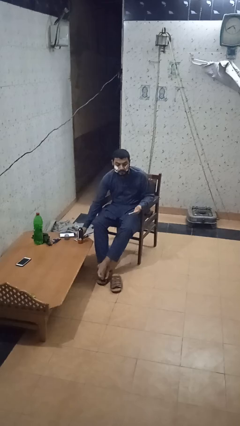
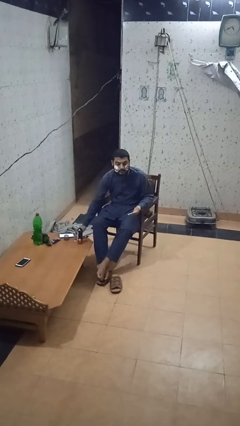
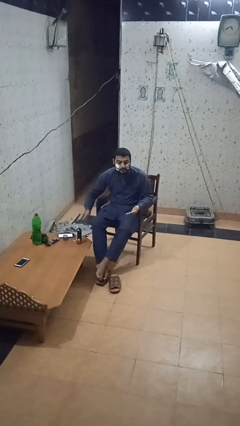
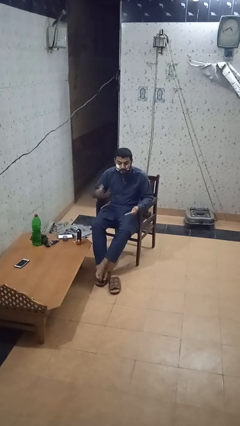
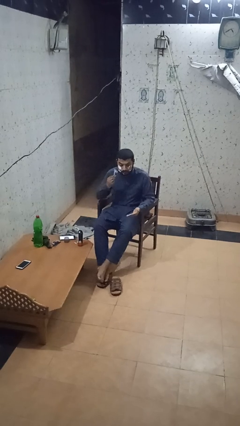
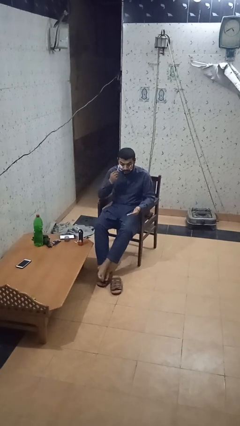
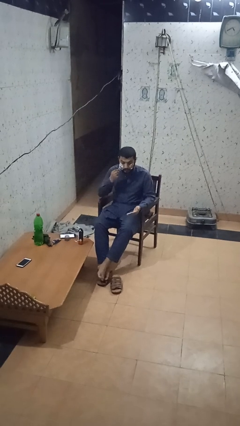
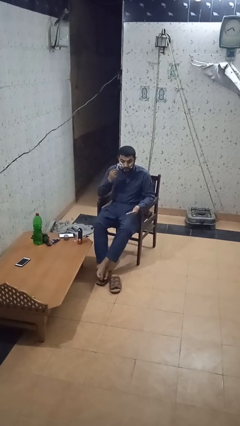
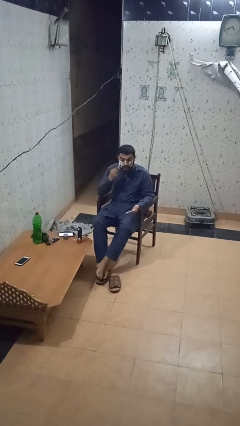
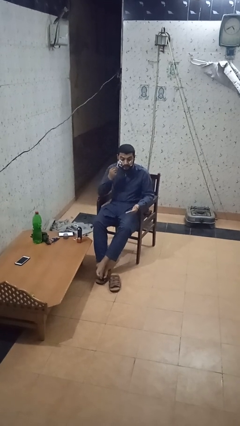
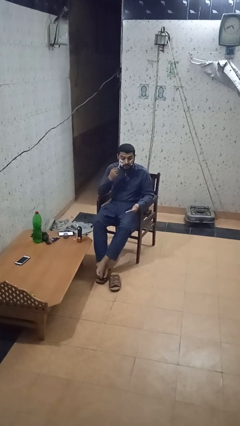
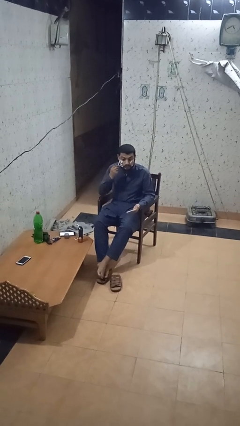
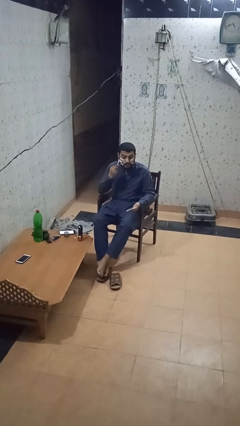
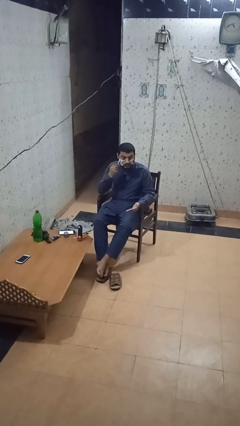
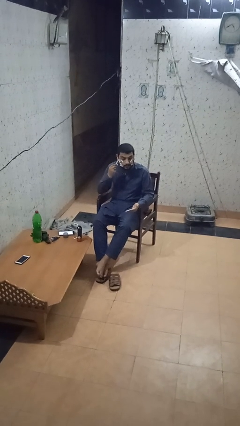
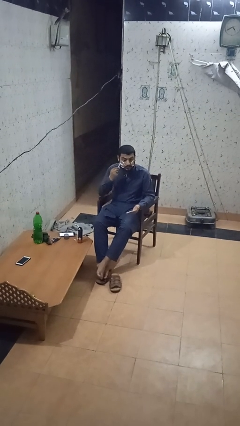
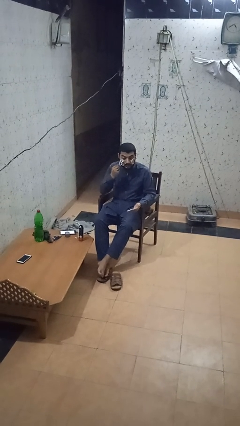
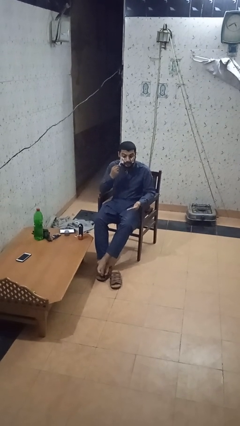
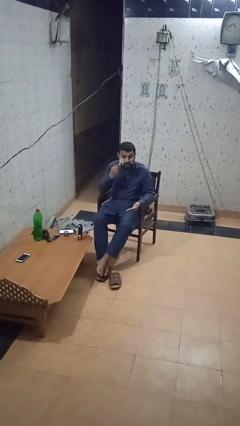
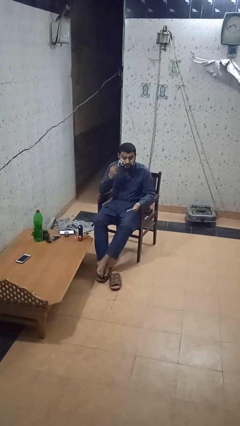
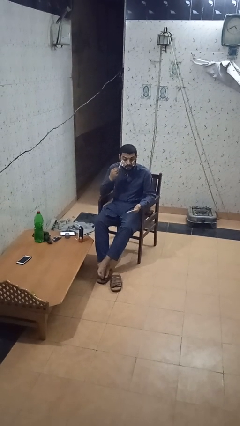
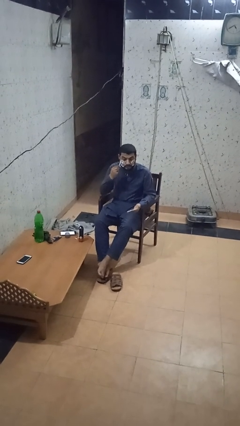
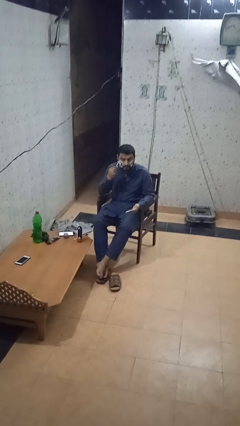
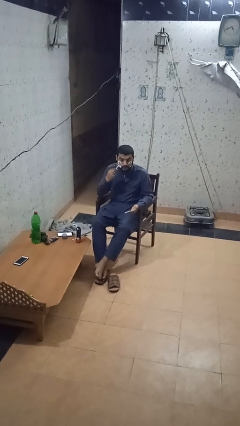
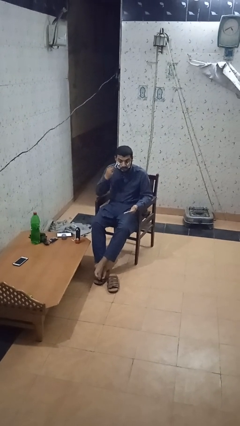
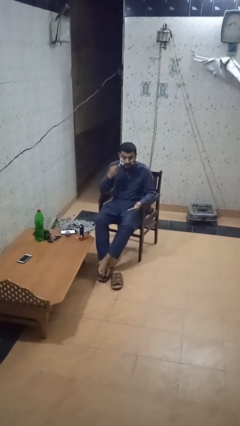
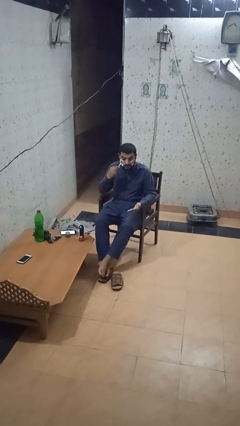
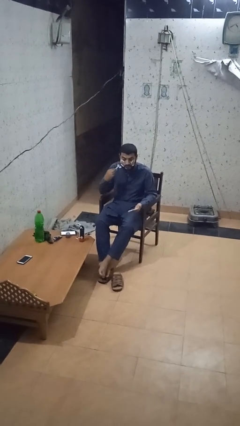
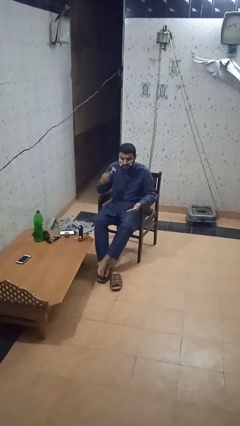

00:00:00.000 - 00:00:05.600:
person shaves face

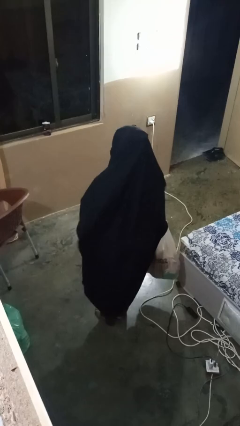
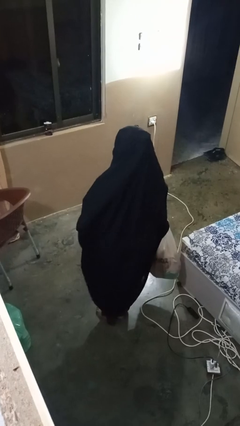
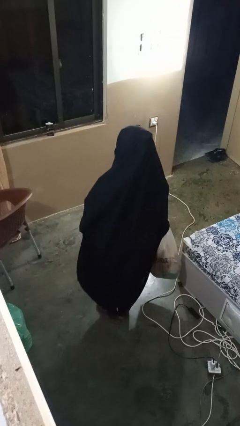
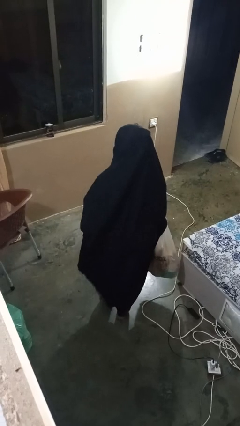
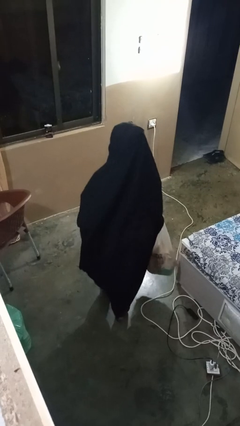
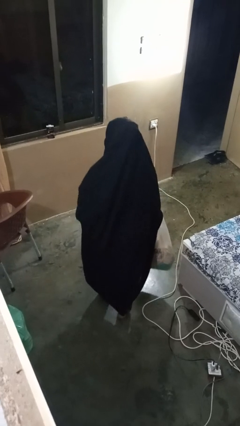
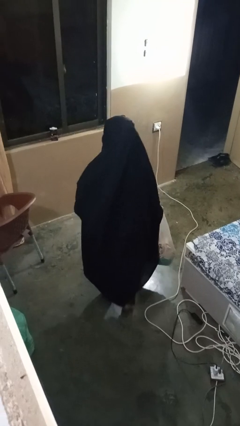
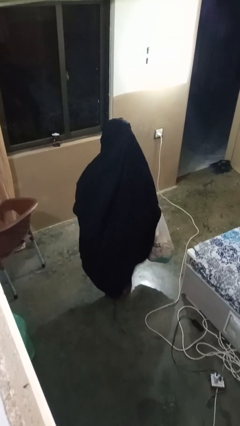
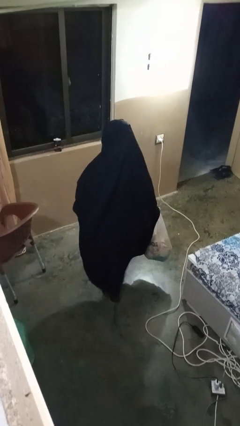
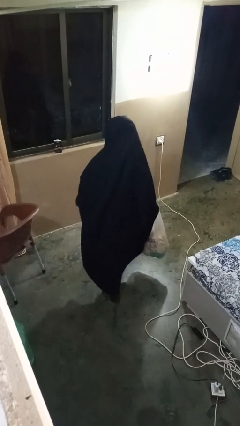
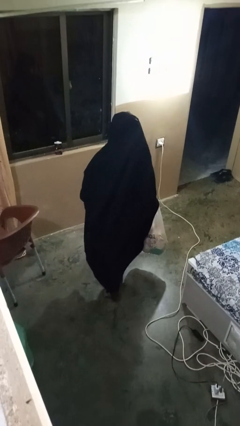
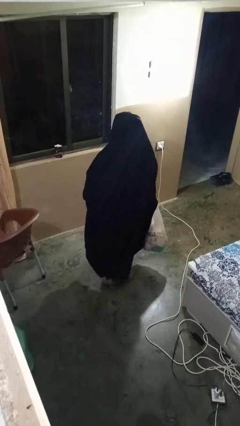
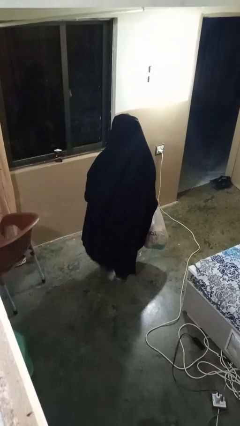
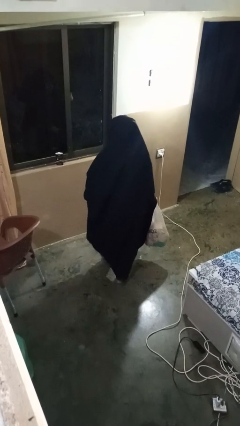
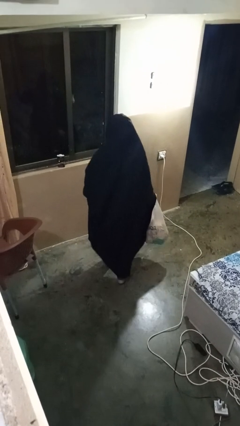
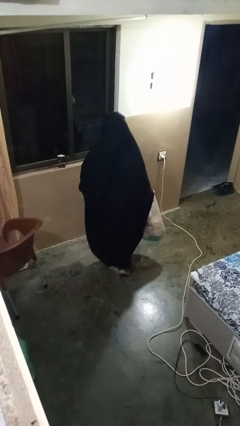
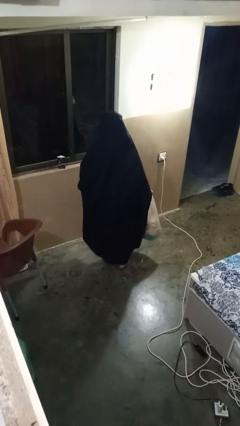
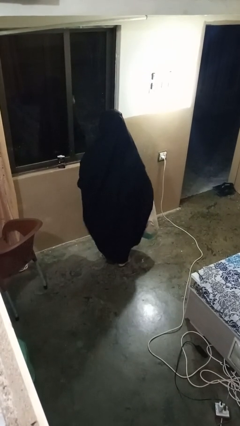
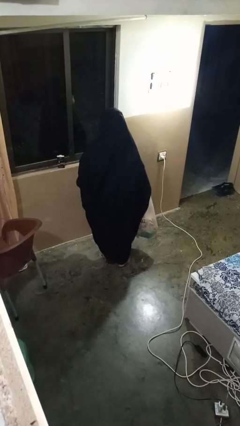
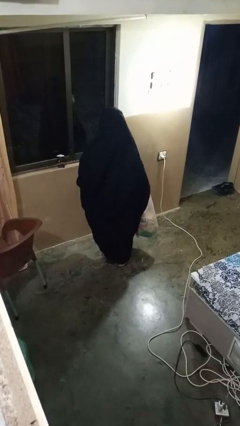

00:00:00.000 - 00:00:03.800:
person carries groceries

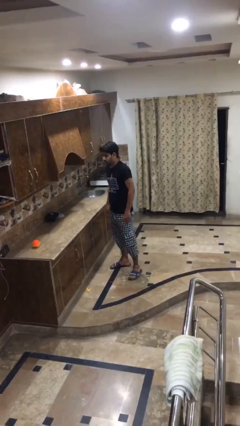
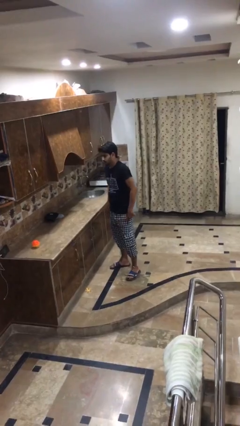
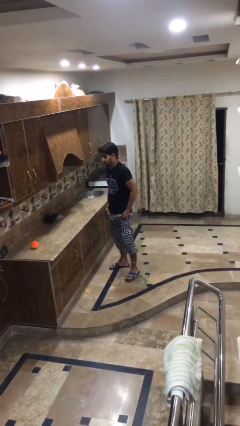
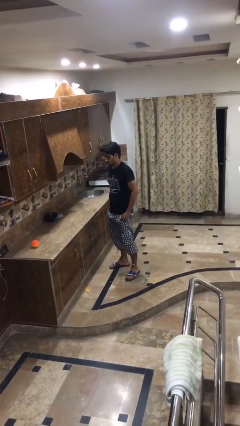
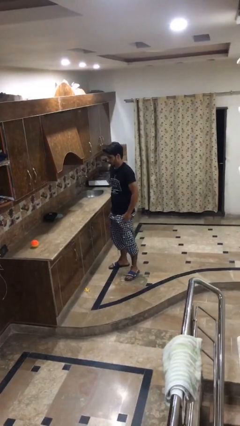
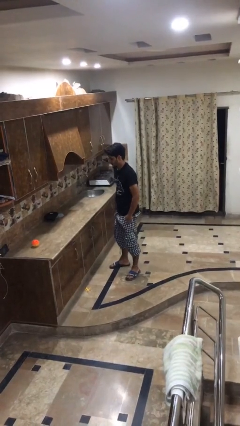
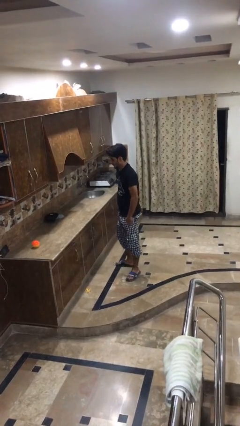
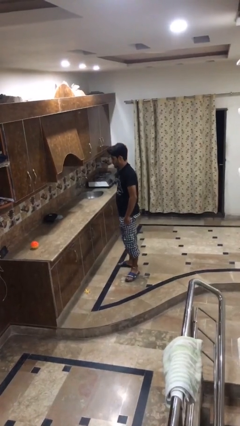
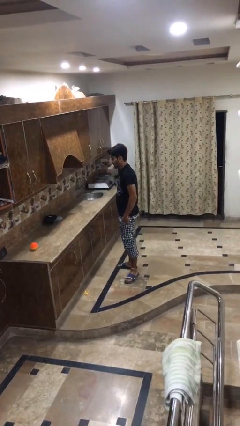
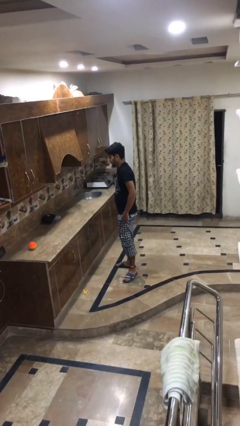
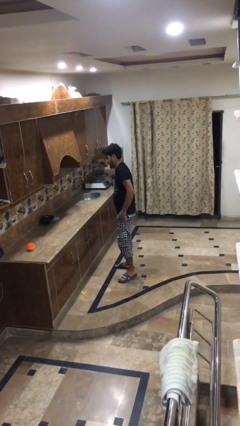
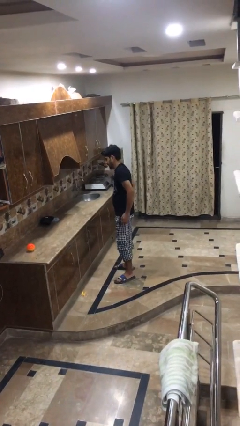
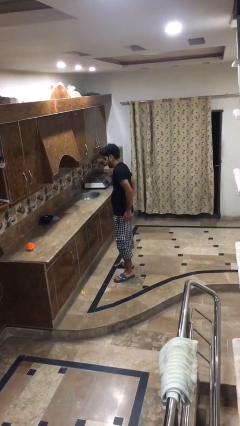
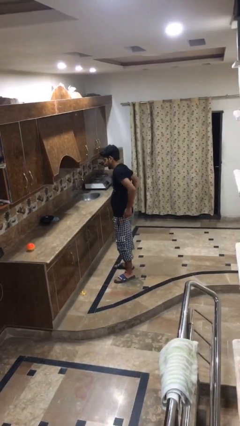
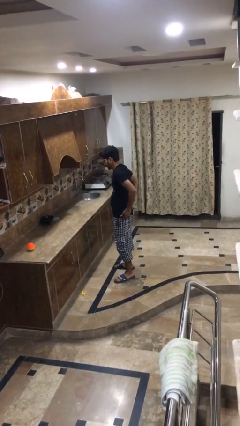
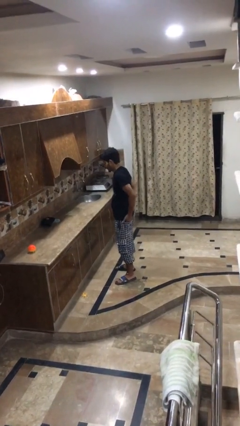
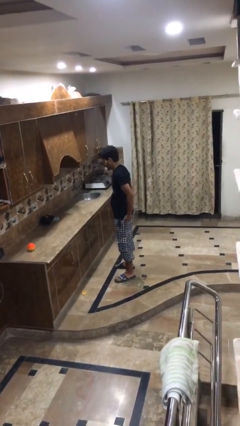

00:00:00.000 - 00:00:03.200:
person puts hands in back pockets

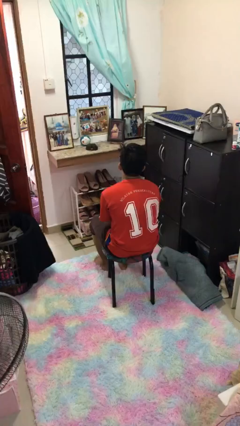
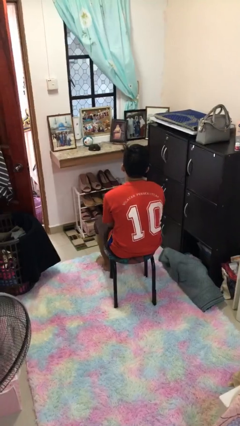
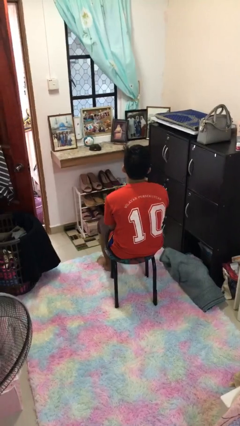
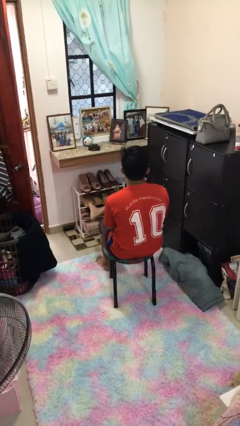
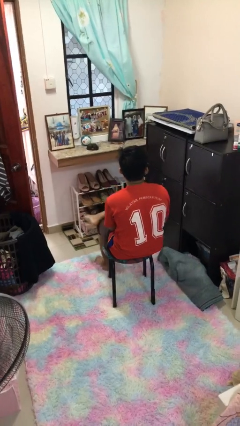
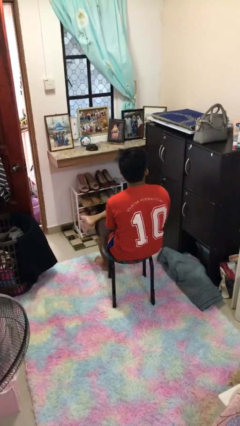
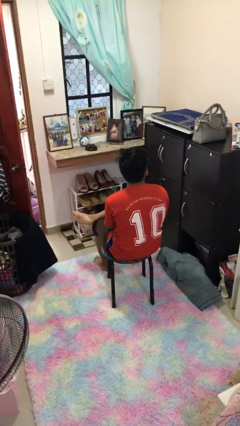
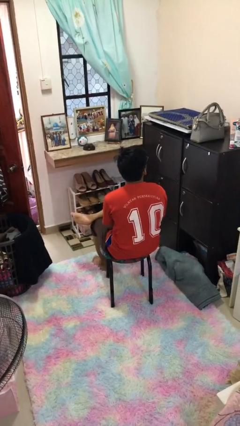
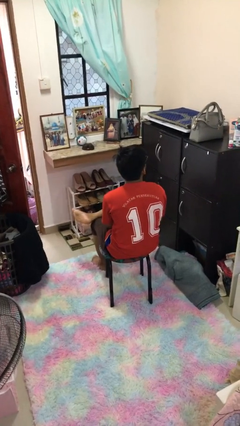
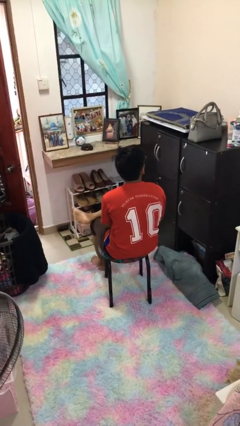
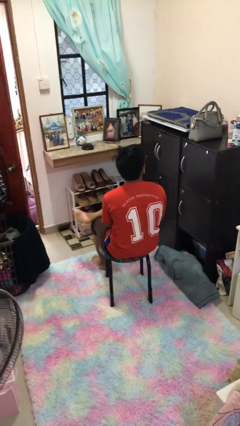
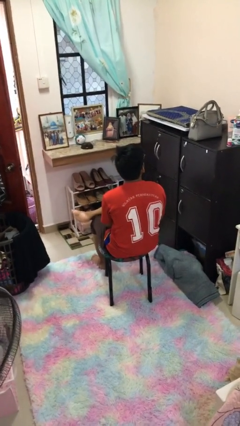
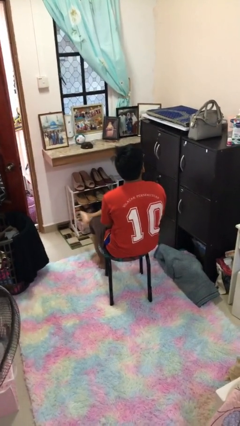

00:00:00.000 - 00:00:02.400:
person crosses legs

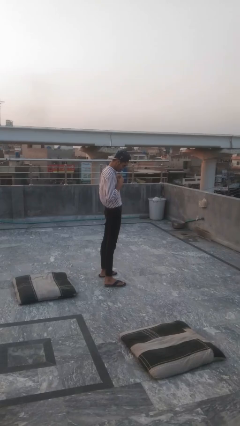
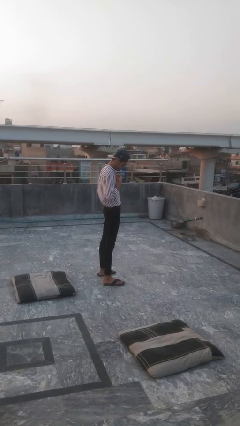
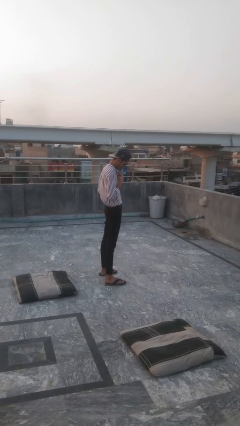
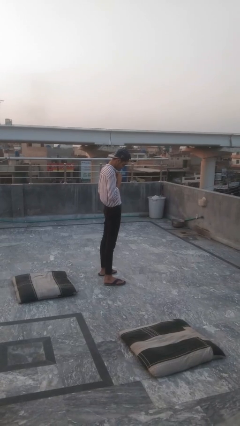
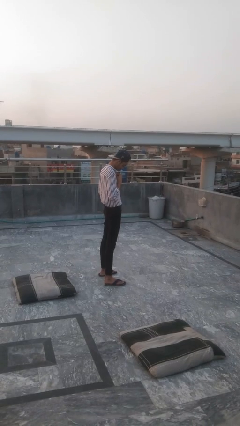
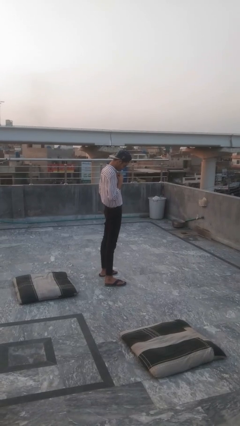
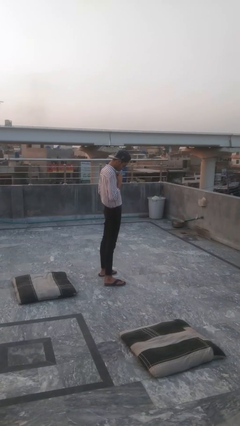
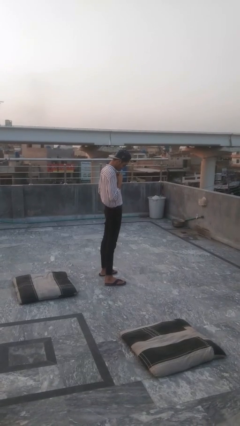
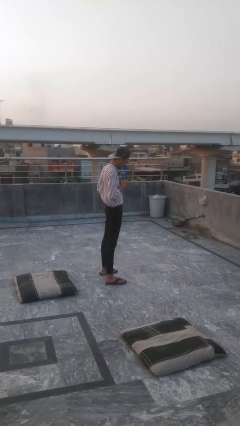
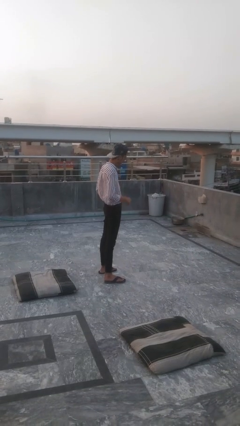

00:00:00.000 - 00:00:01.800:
person buttons shirt

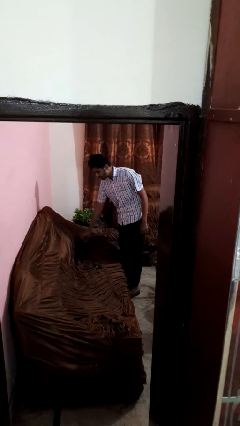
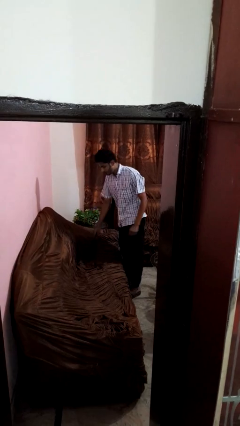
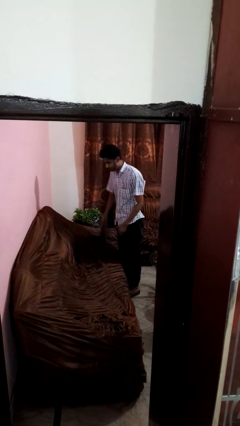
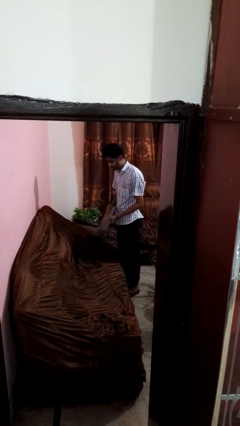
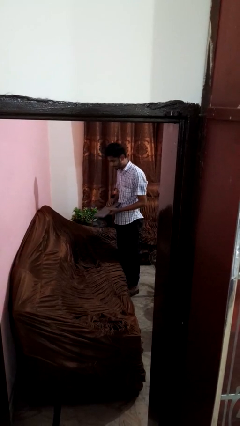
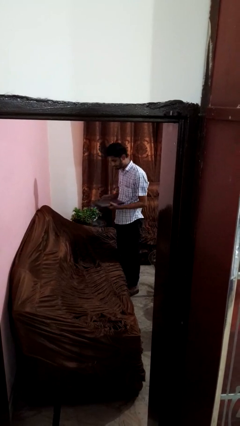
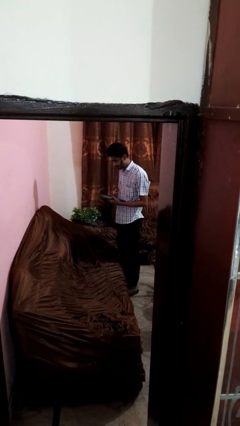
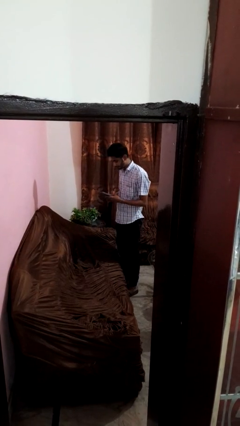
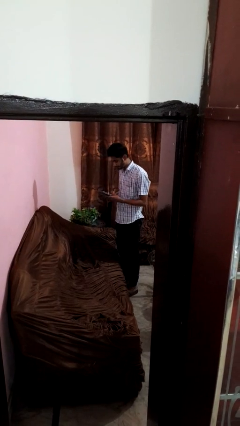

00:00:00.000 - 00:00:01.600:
person picks up object from couch
